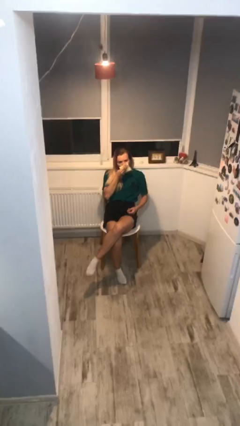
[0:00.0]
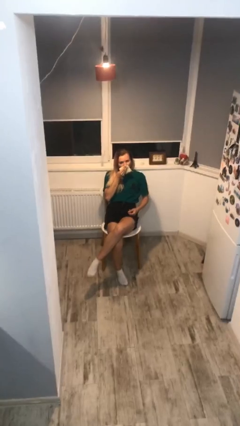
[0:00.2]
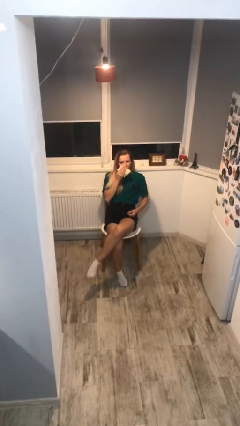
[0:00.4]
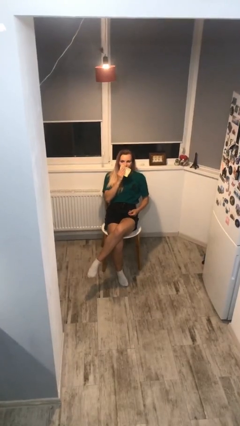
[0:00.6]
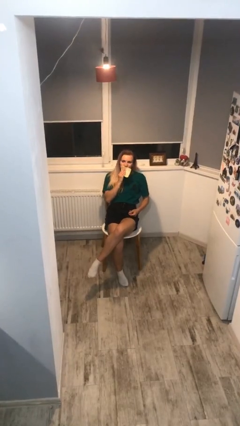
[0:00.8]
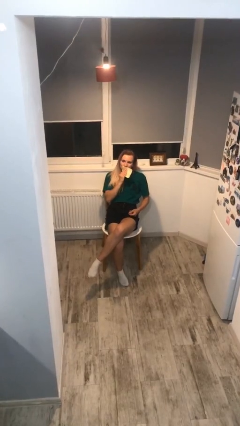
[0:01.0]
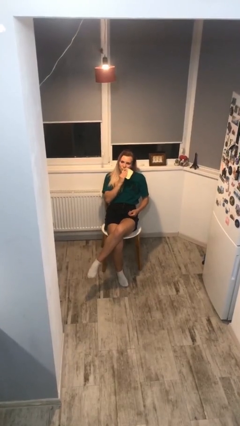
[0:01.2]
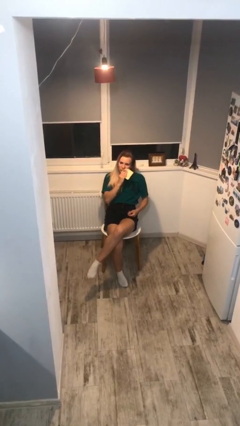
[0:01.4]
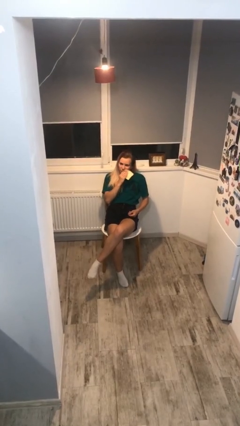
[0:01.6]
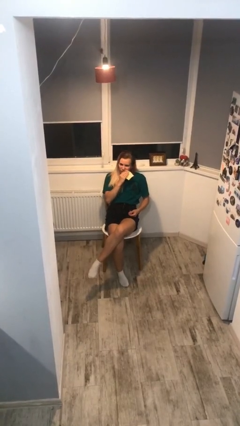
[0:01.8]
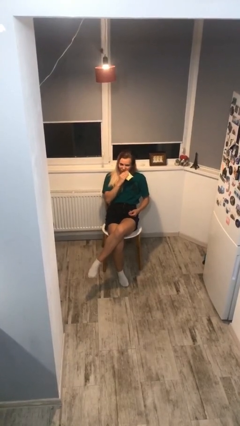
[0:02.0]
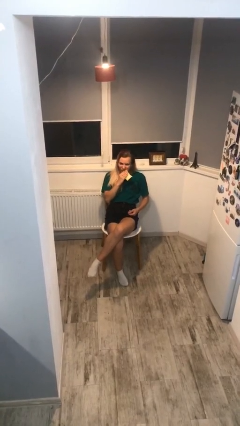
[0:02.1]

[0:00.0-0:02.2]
person wipes mouth with napkin

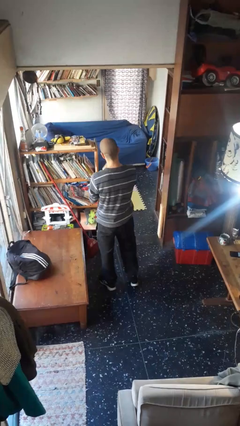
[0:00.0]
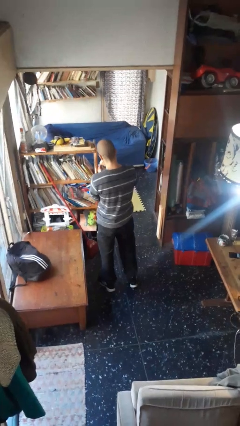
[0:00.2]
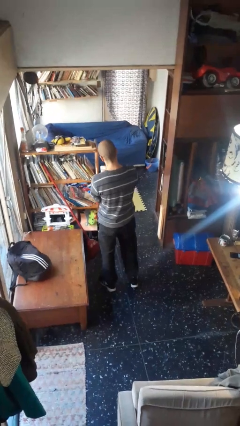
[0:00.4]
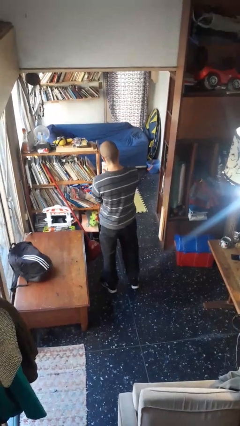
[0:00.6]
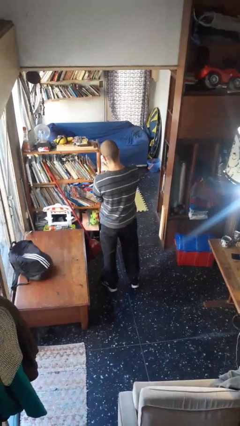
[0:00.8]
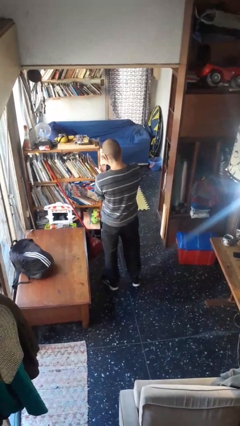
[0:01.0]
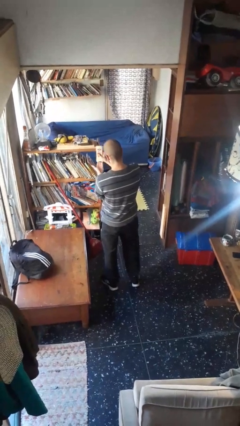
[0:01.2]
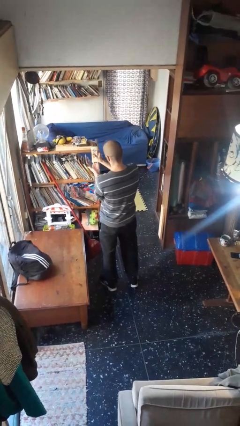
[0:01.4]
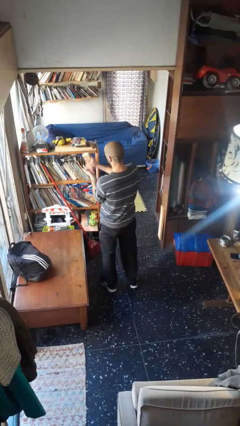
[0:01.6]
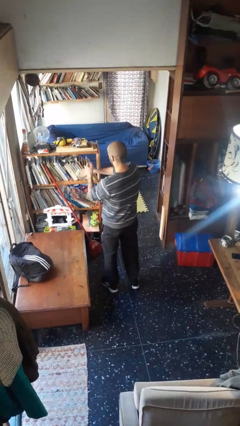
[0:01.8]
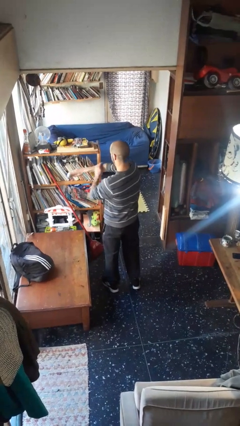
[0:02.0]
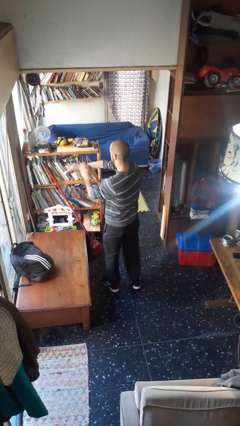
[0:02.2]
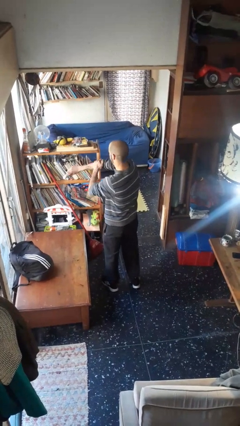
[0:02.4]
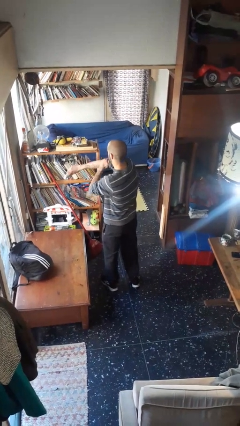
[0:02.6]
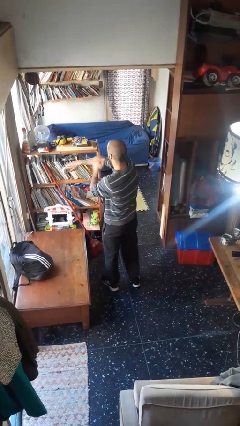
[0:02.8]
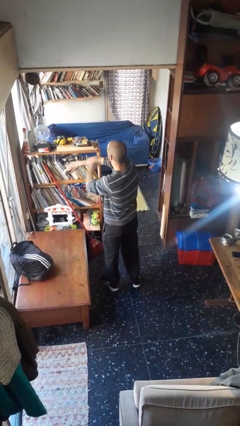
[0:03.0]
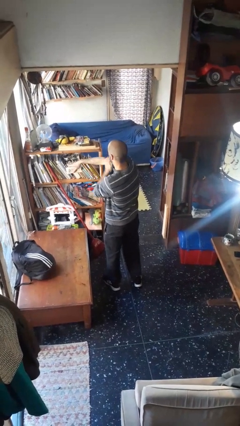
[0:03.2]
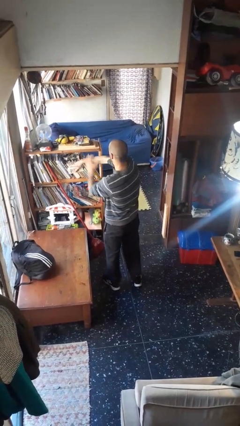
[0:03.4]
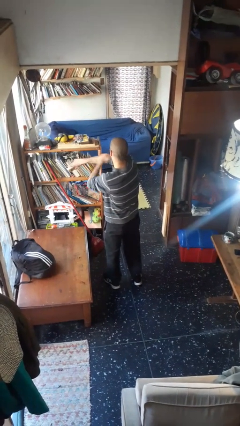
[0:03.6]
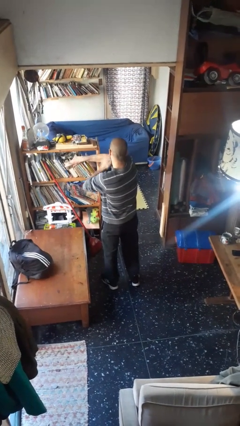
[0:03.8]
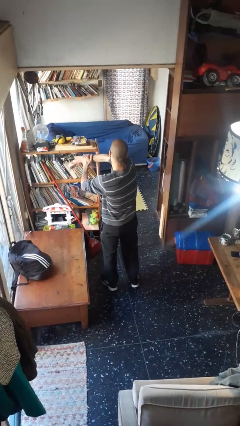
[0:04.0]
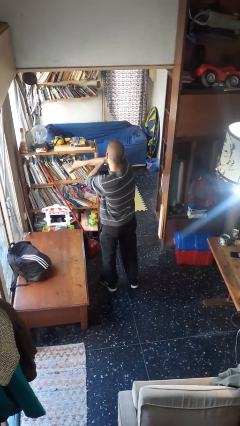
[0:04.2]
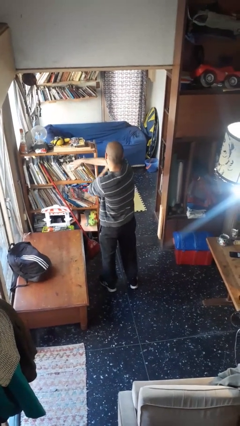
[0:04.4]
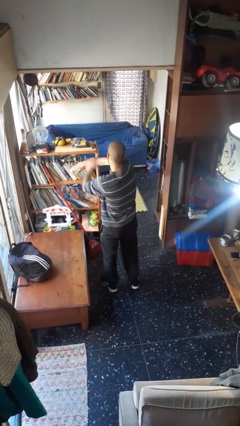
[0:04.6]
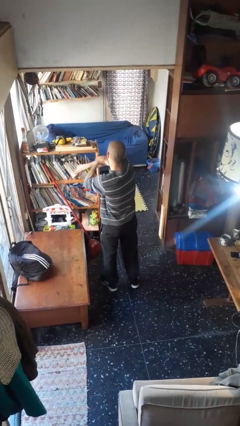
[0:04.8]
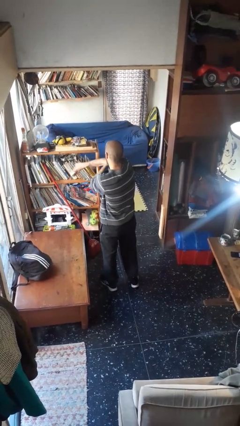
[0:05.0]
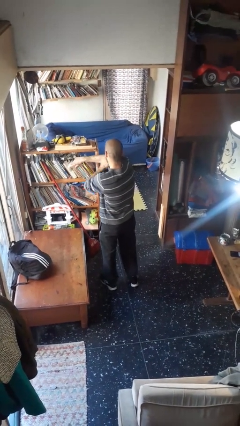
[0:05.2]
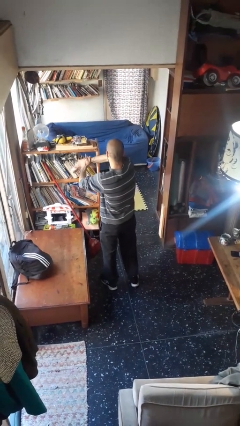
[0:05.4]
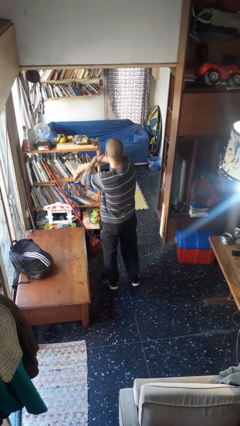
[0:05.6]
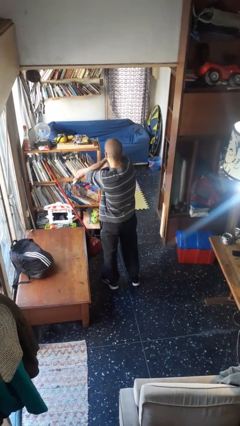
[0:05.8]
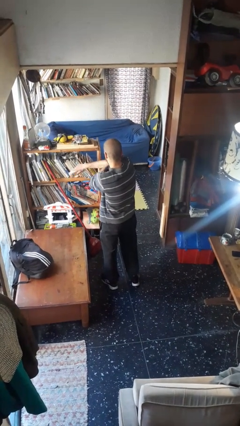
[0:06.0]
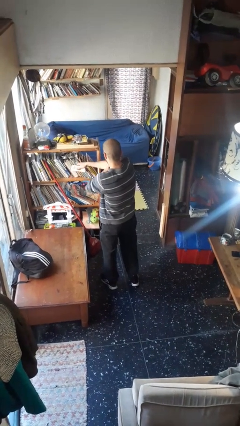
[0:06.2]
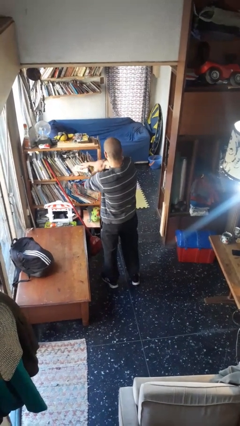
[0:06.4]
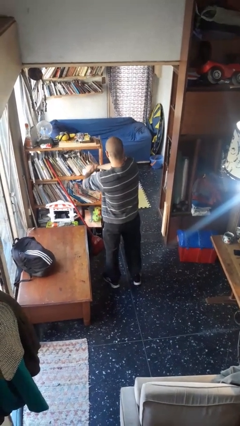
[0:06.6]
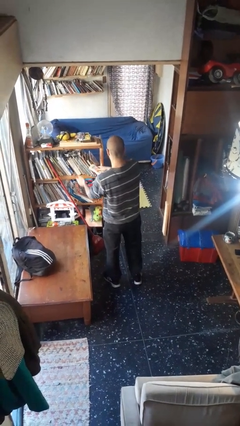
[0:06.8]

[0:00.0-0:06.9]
person applies sunscreen

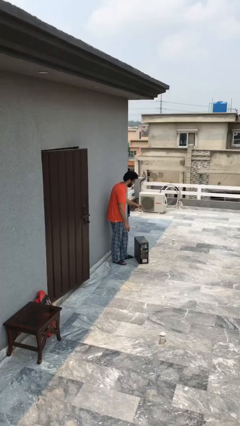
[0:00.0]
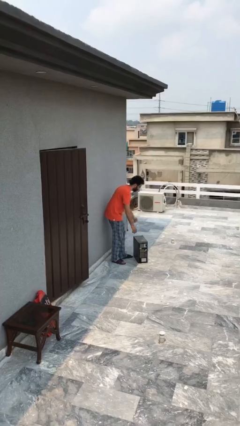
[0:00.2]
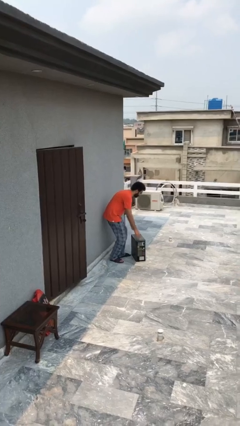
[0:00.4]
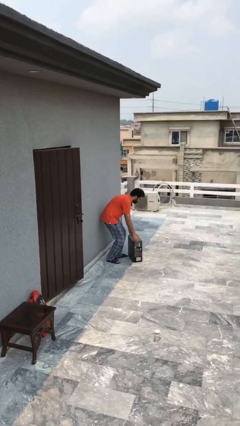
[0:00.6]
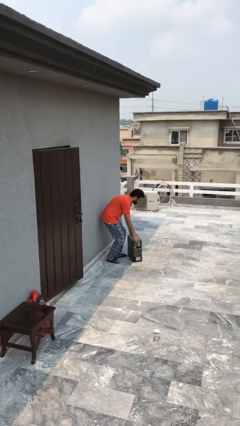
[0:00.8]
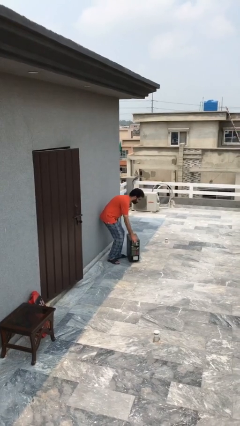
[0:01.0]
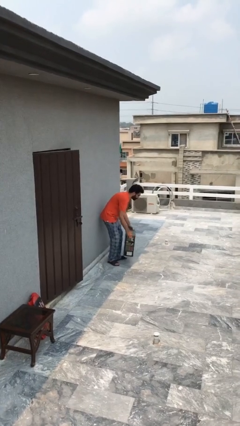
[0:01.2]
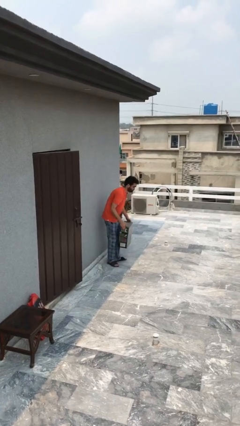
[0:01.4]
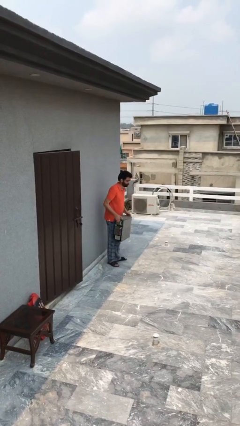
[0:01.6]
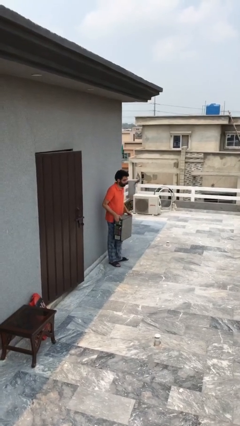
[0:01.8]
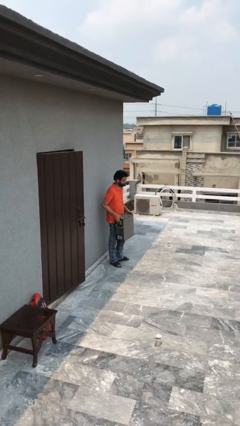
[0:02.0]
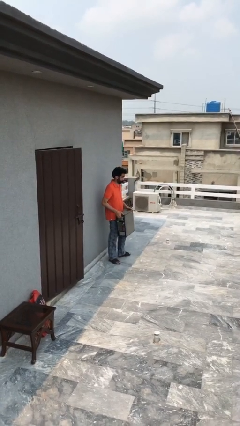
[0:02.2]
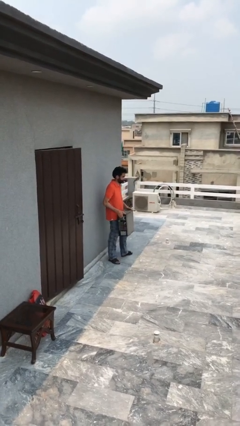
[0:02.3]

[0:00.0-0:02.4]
person picks up object from floor

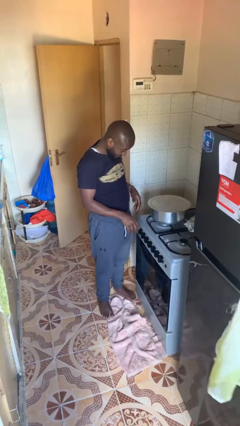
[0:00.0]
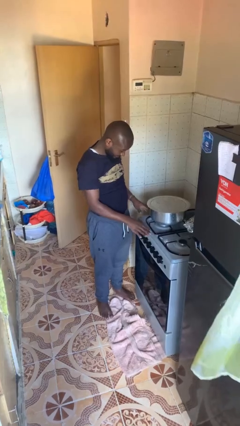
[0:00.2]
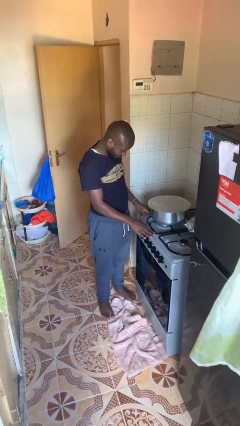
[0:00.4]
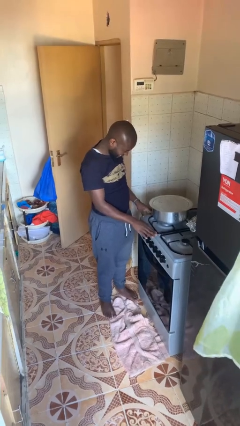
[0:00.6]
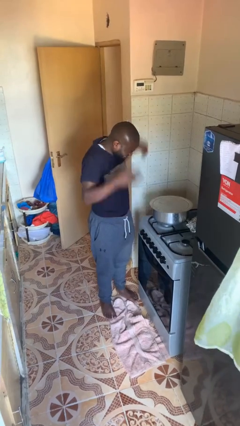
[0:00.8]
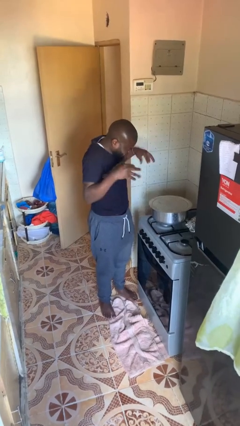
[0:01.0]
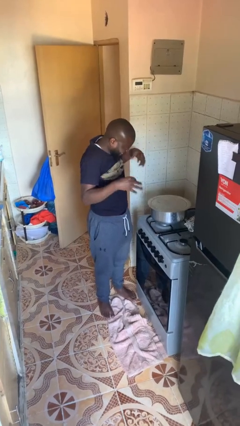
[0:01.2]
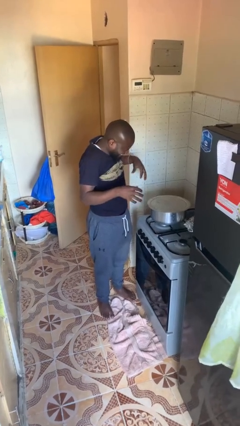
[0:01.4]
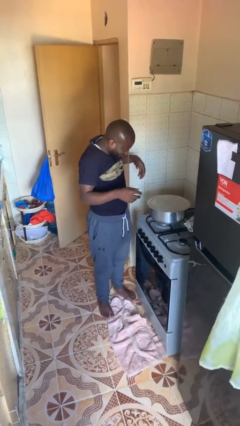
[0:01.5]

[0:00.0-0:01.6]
person burns hand

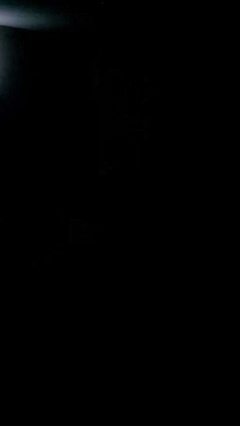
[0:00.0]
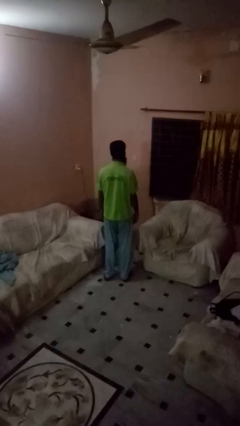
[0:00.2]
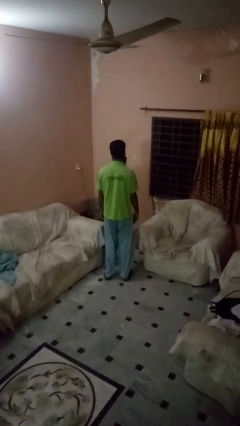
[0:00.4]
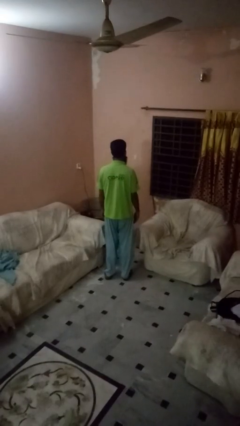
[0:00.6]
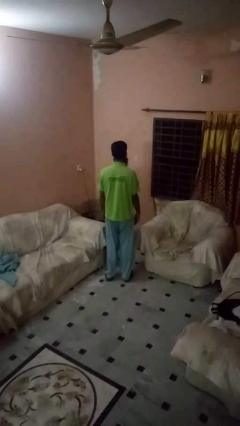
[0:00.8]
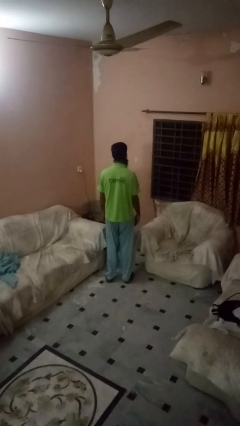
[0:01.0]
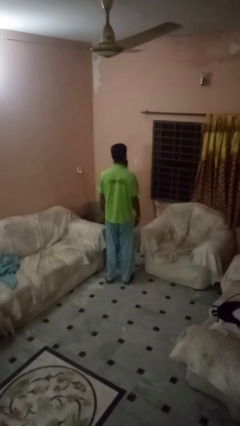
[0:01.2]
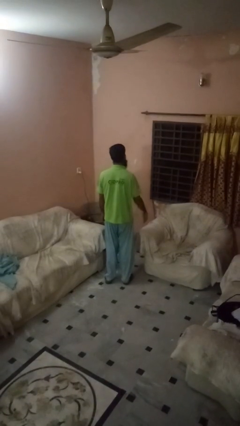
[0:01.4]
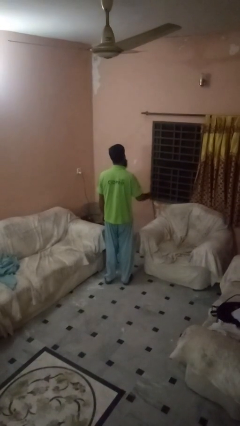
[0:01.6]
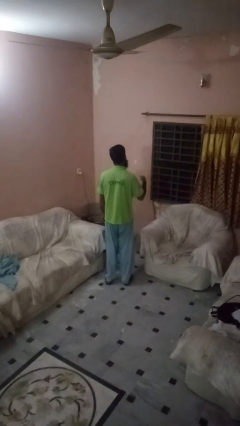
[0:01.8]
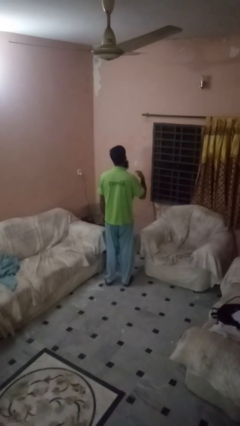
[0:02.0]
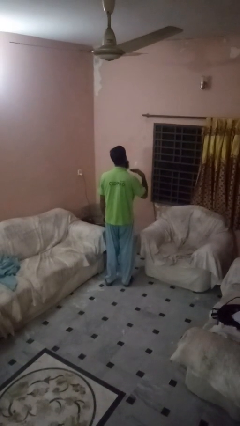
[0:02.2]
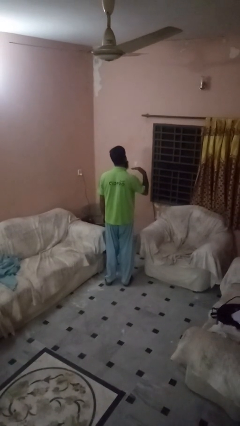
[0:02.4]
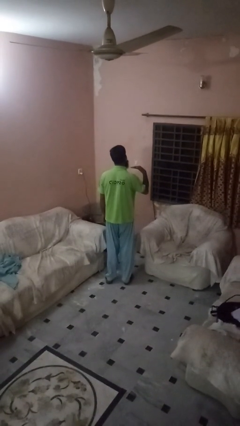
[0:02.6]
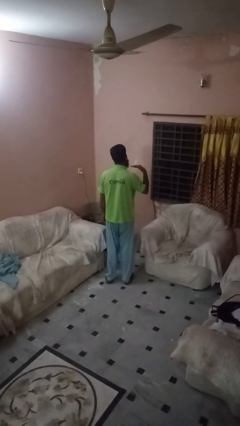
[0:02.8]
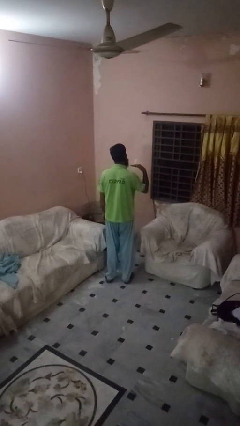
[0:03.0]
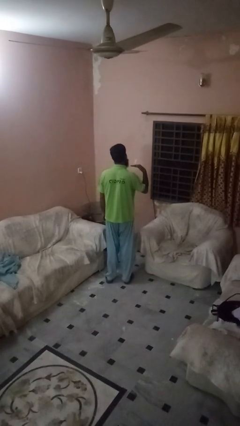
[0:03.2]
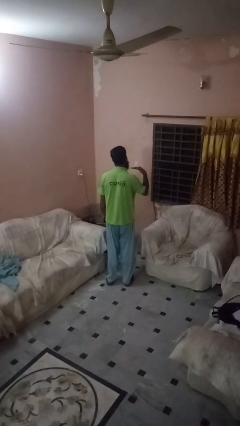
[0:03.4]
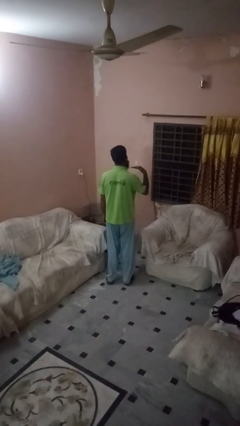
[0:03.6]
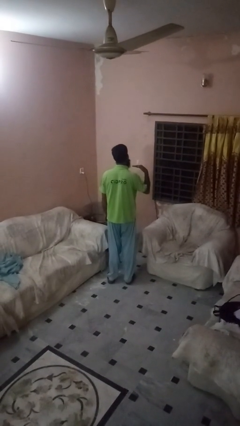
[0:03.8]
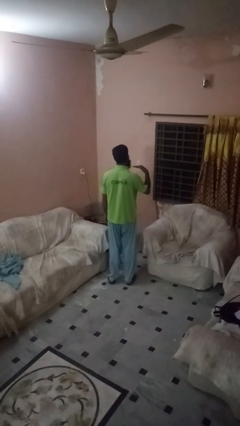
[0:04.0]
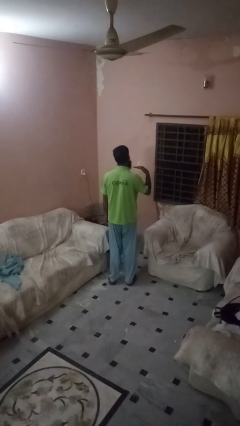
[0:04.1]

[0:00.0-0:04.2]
person gestures cut
